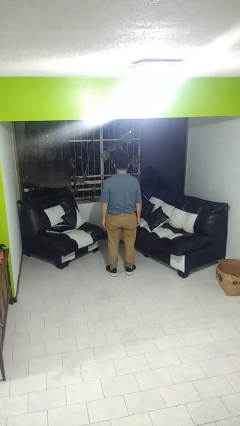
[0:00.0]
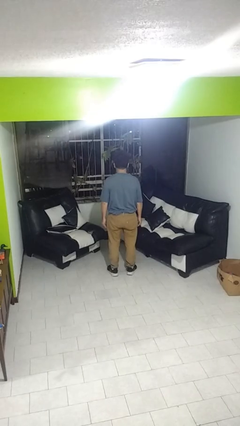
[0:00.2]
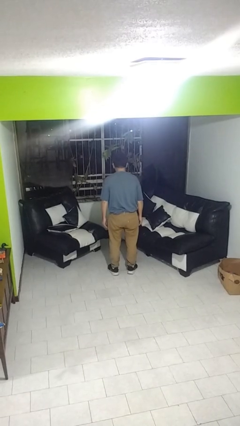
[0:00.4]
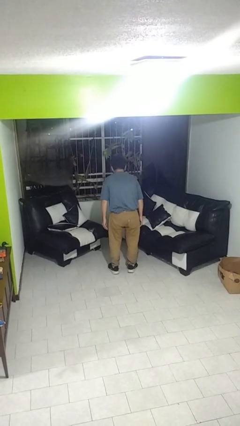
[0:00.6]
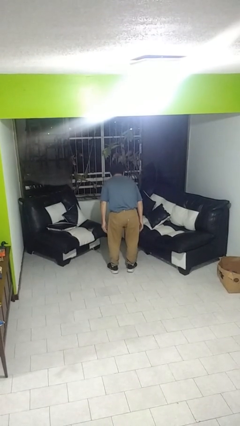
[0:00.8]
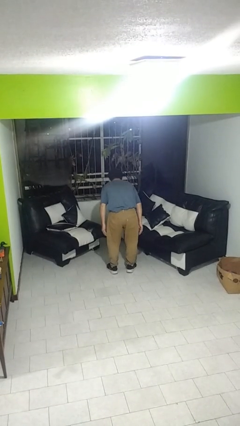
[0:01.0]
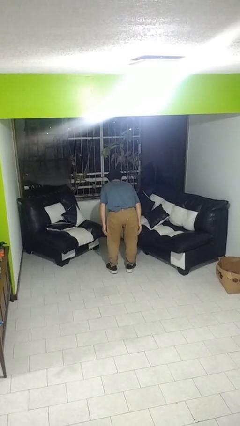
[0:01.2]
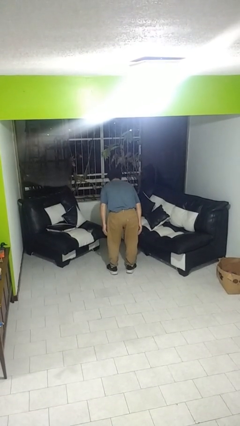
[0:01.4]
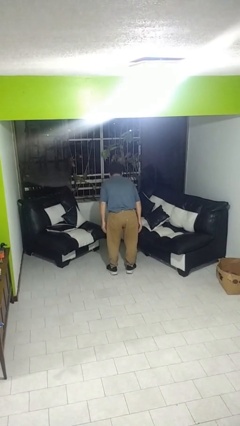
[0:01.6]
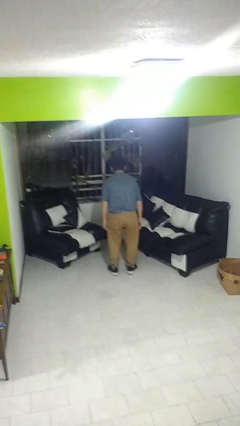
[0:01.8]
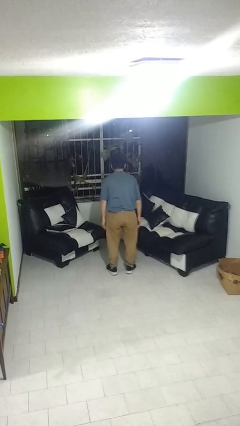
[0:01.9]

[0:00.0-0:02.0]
person bows

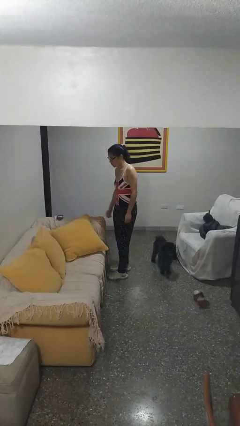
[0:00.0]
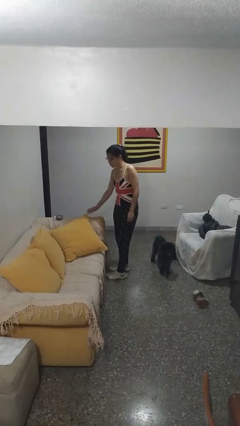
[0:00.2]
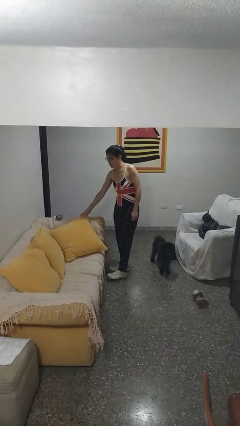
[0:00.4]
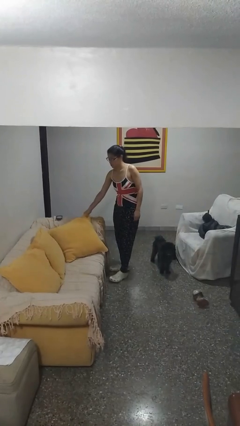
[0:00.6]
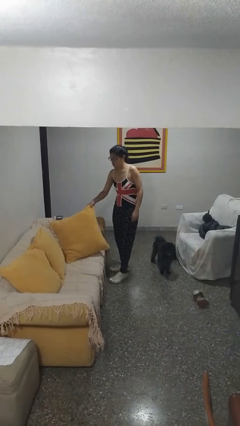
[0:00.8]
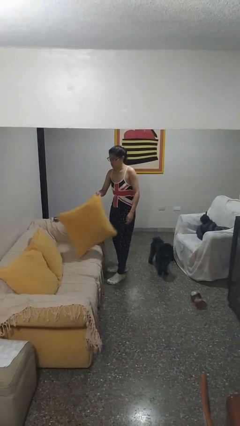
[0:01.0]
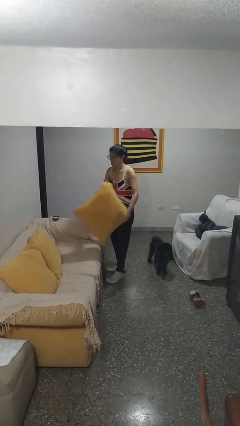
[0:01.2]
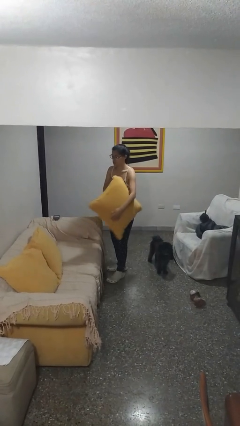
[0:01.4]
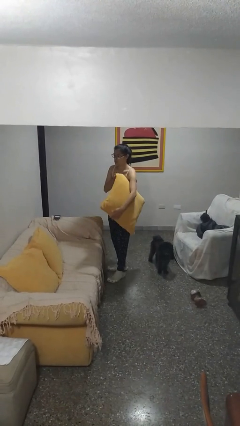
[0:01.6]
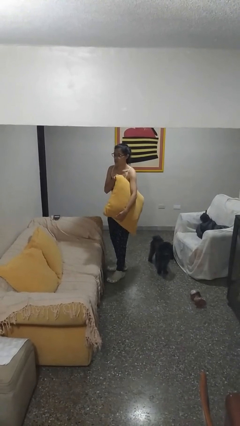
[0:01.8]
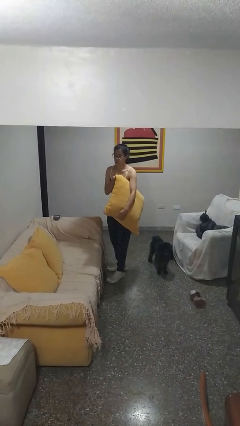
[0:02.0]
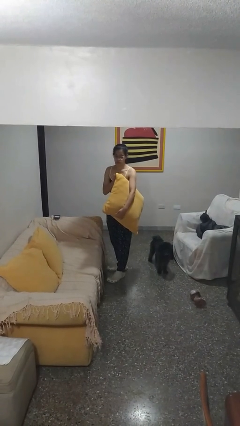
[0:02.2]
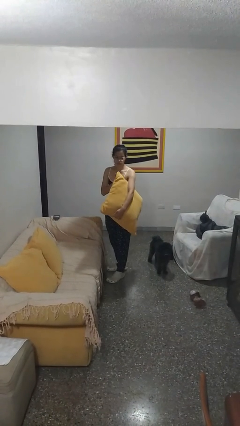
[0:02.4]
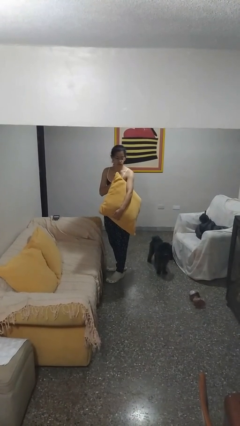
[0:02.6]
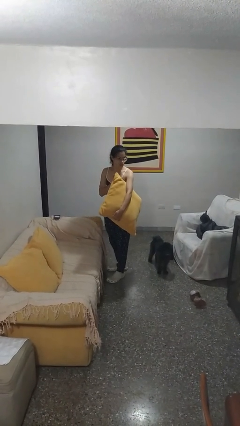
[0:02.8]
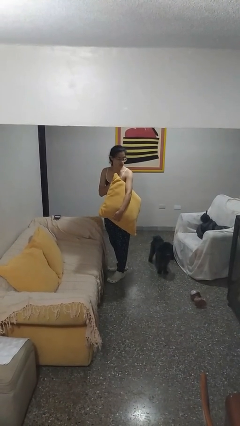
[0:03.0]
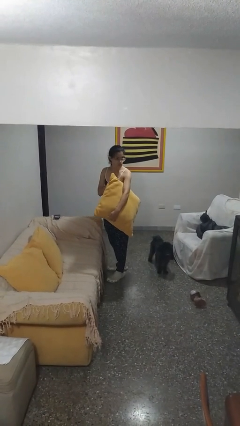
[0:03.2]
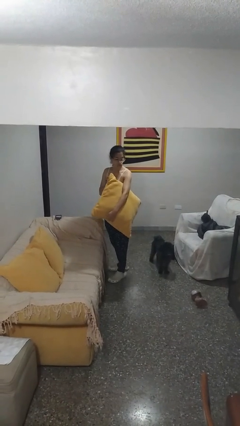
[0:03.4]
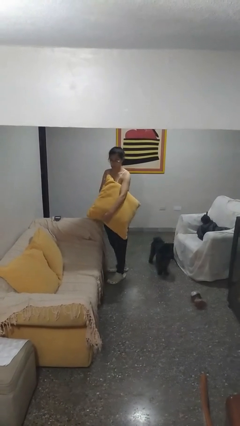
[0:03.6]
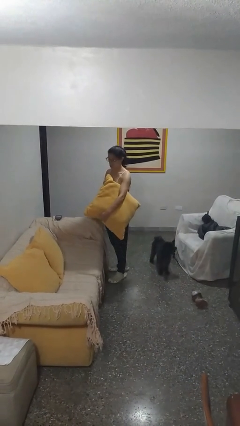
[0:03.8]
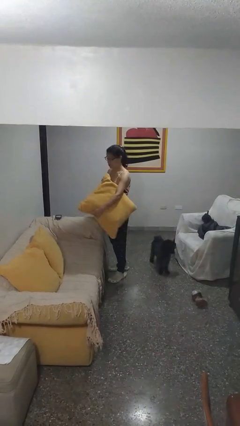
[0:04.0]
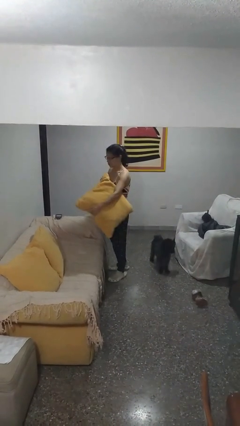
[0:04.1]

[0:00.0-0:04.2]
person picks up object from couch

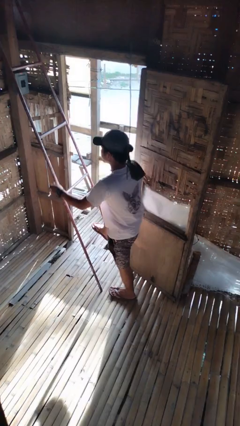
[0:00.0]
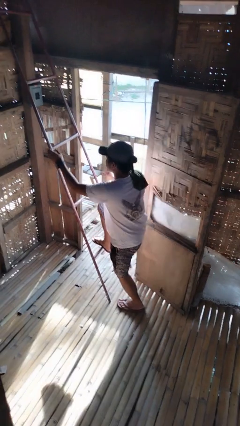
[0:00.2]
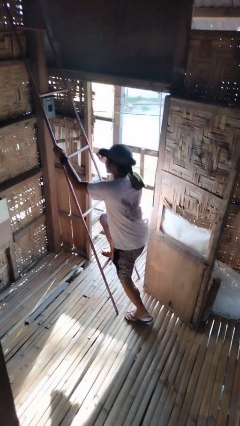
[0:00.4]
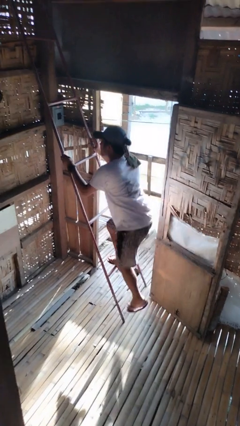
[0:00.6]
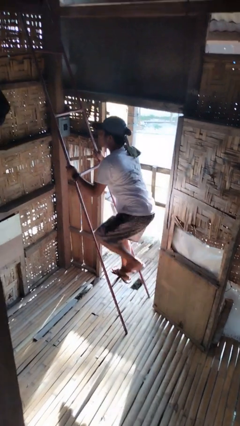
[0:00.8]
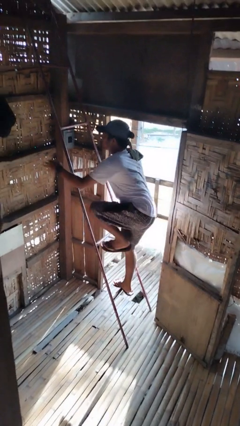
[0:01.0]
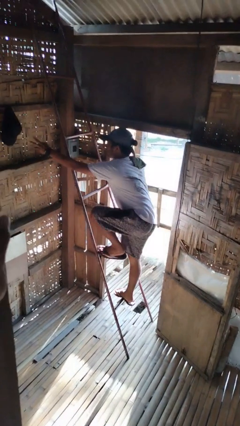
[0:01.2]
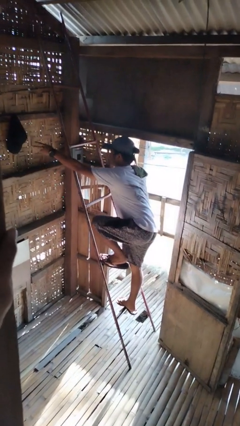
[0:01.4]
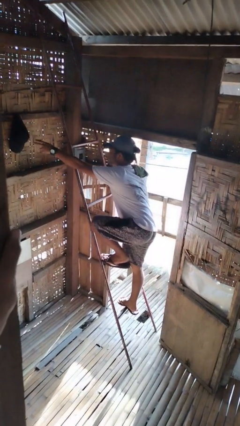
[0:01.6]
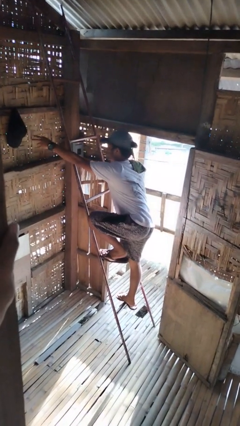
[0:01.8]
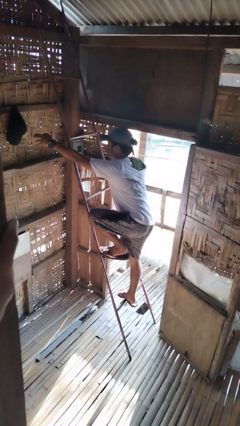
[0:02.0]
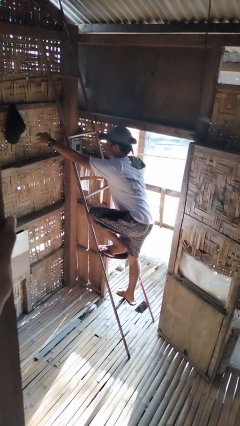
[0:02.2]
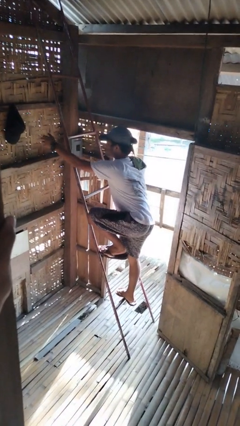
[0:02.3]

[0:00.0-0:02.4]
person climbs up ladder

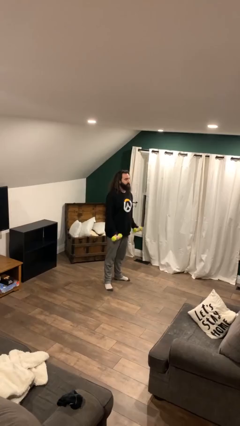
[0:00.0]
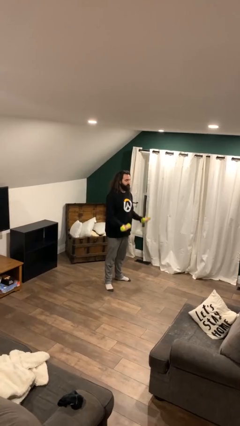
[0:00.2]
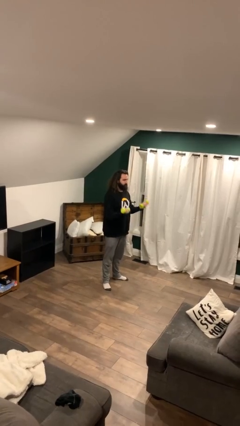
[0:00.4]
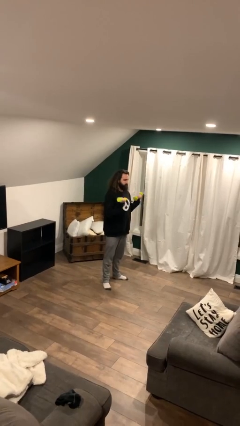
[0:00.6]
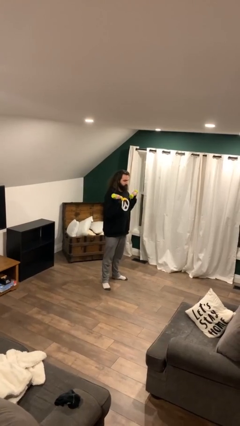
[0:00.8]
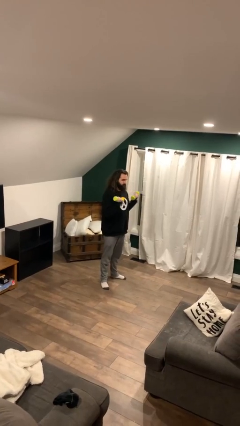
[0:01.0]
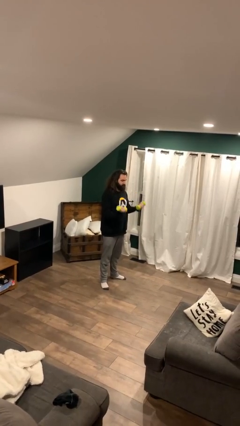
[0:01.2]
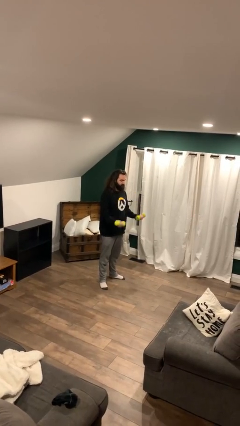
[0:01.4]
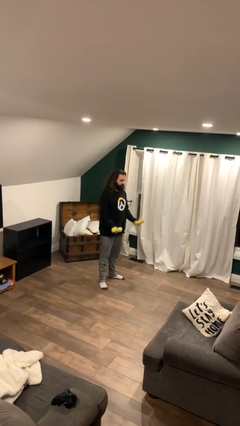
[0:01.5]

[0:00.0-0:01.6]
person lifts dumbbells

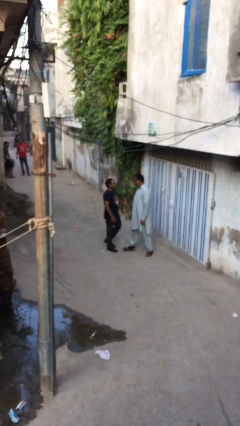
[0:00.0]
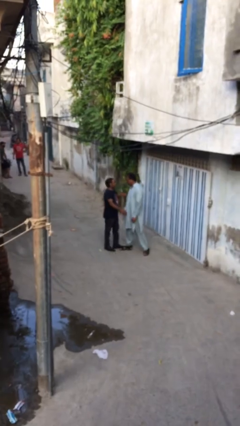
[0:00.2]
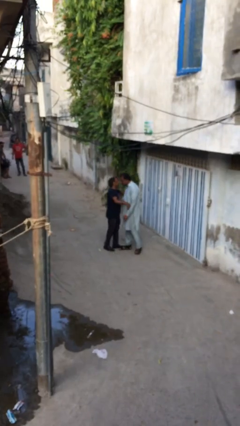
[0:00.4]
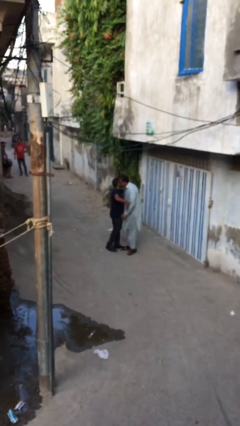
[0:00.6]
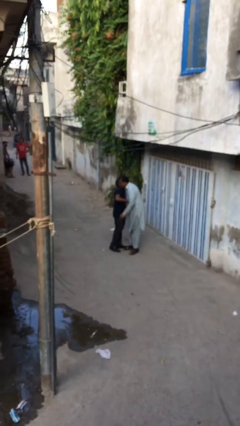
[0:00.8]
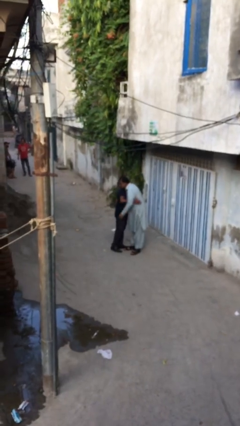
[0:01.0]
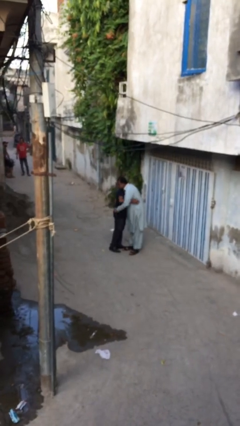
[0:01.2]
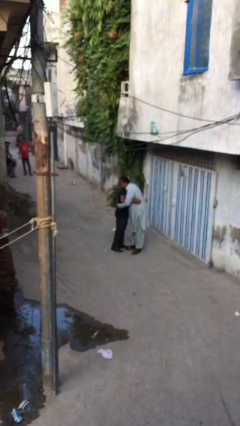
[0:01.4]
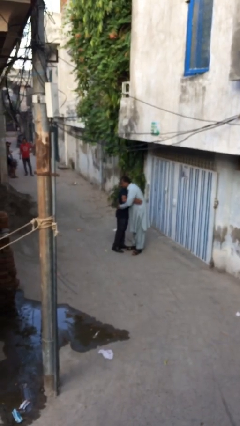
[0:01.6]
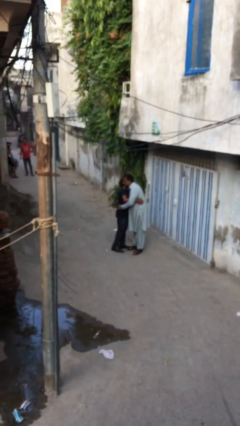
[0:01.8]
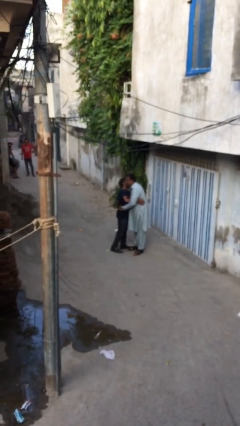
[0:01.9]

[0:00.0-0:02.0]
person embraces person

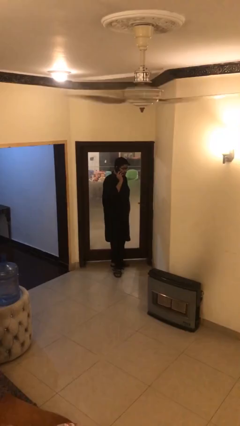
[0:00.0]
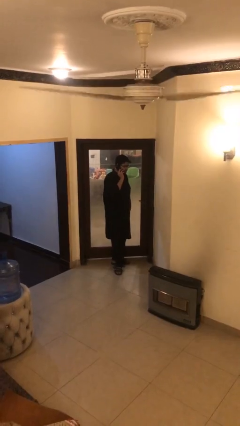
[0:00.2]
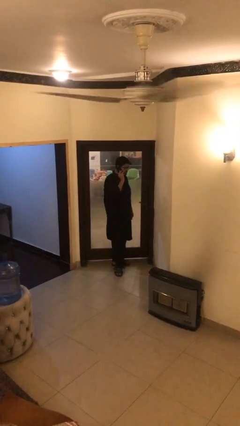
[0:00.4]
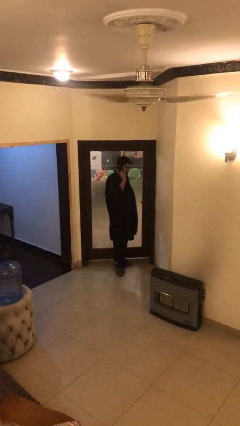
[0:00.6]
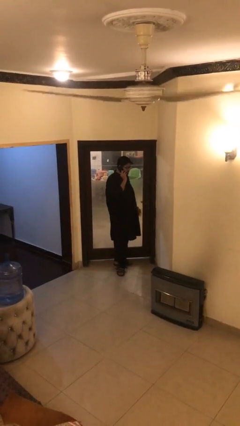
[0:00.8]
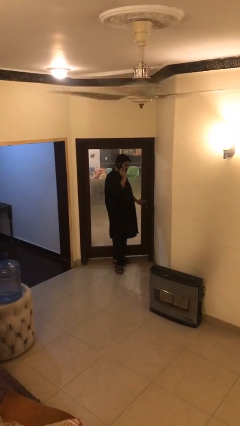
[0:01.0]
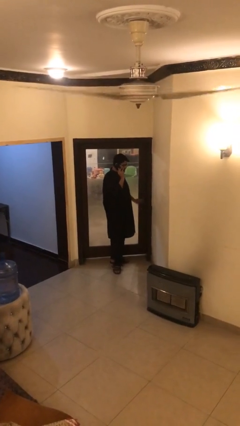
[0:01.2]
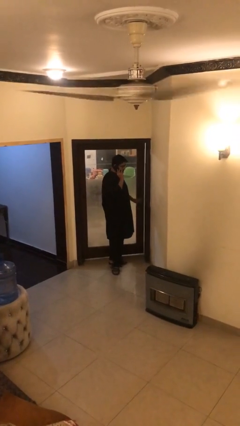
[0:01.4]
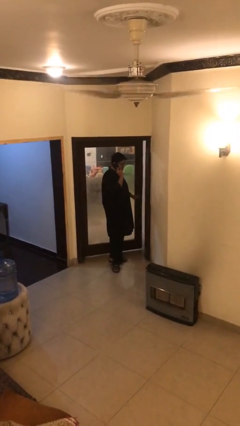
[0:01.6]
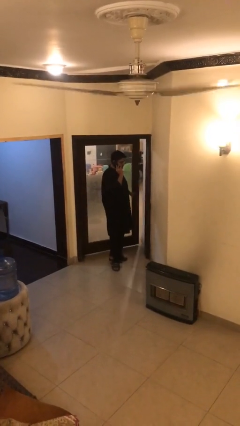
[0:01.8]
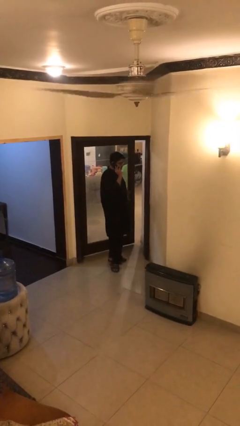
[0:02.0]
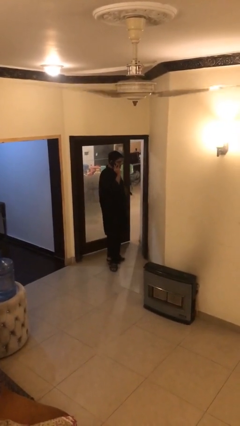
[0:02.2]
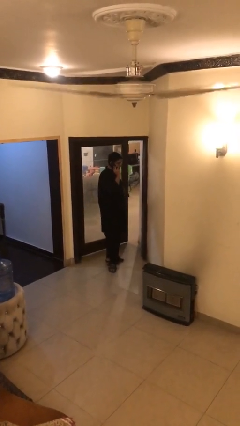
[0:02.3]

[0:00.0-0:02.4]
person opens facility door

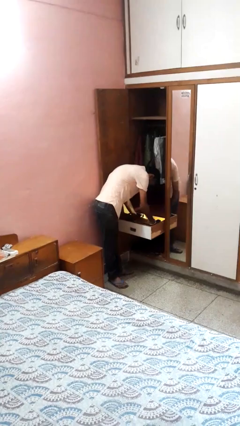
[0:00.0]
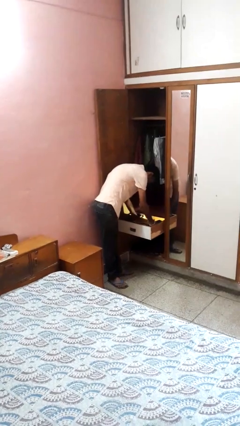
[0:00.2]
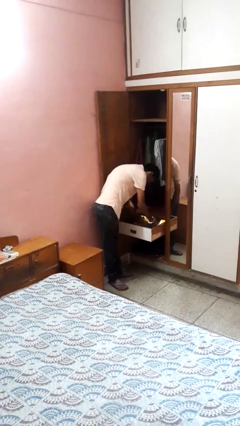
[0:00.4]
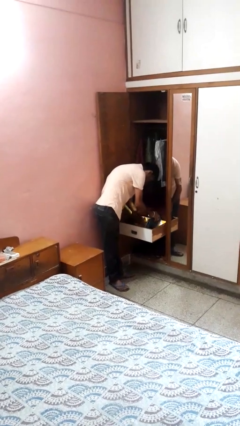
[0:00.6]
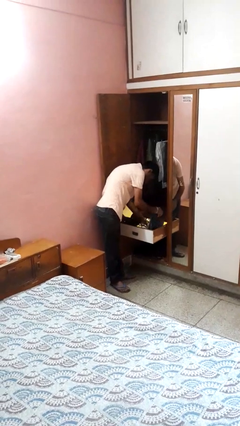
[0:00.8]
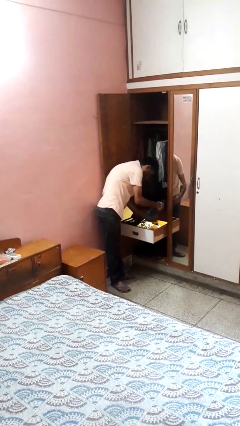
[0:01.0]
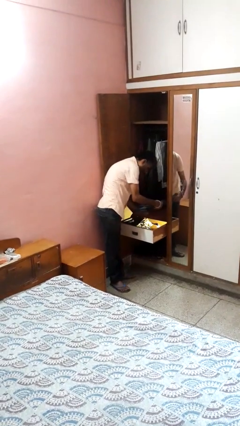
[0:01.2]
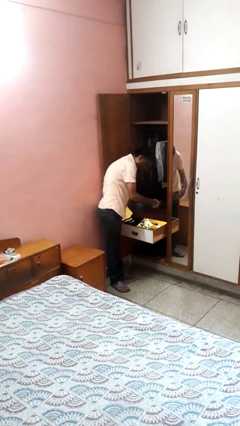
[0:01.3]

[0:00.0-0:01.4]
person takes clothes from dresser

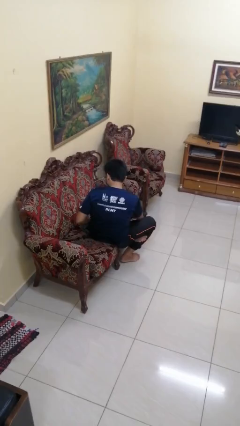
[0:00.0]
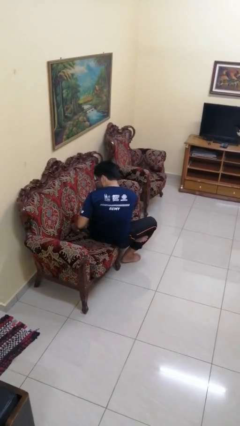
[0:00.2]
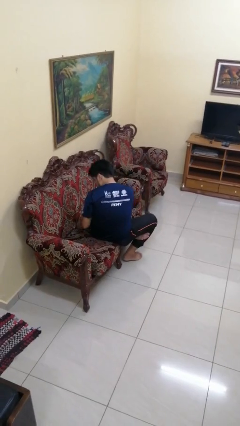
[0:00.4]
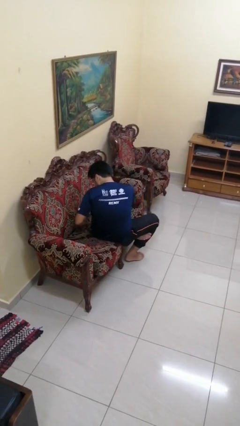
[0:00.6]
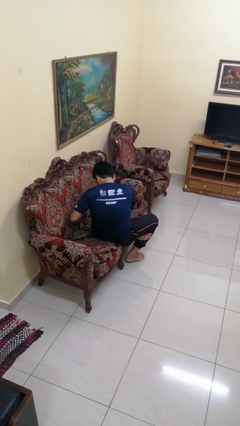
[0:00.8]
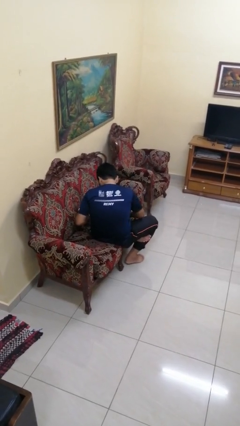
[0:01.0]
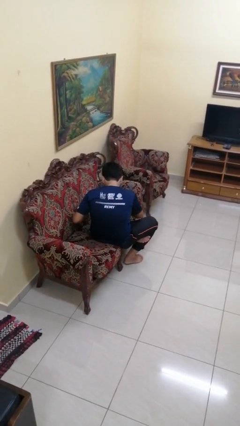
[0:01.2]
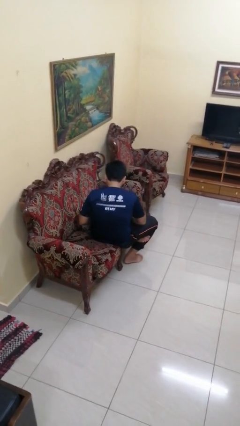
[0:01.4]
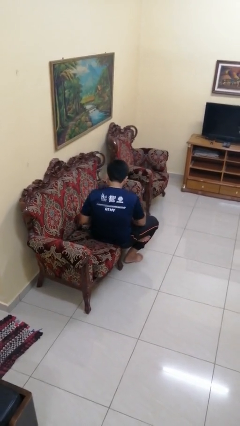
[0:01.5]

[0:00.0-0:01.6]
person searches in couch
